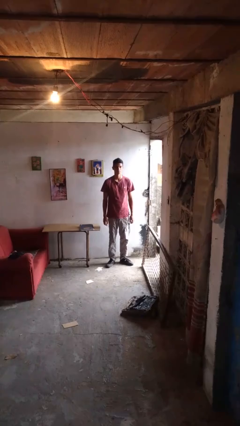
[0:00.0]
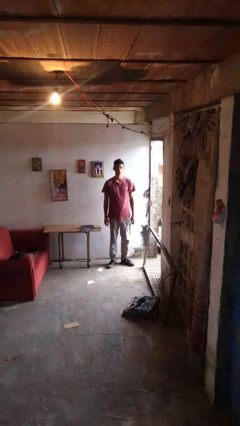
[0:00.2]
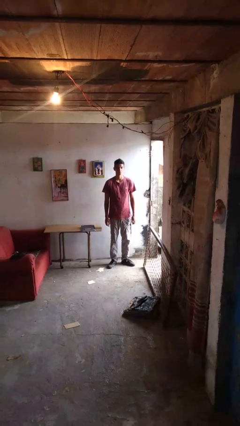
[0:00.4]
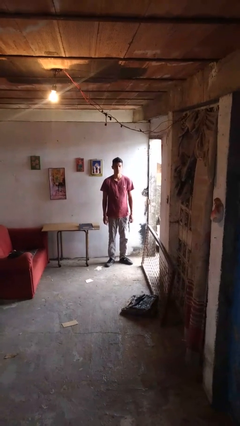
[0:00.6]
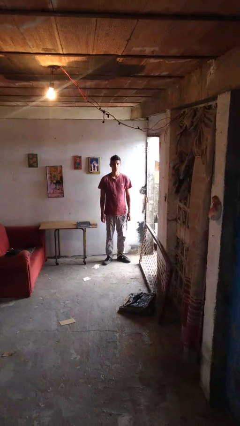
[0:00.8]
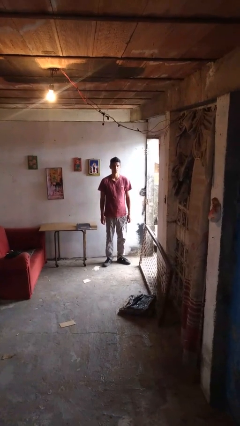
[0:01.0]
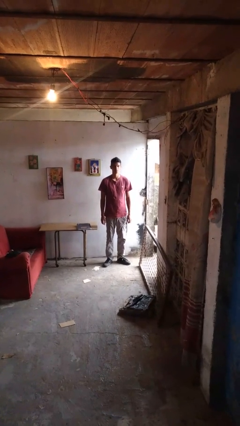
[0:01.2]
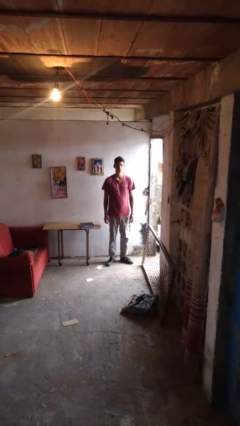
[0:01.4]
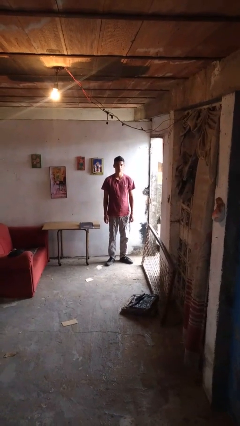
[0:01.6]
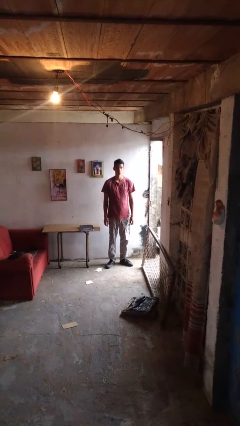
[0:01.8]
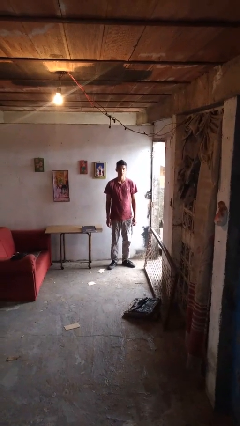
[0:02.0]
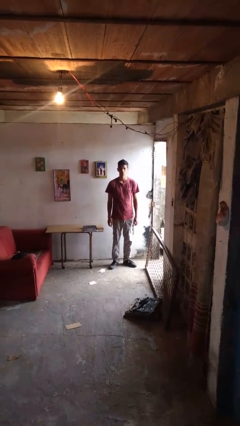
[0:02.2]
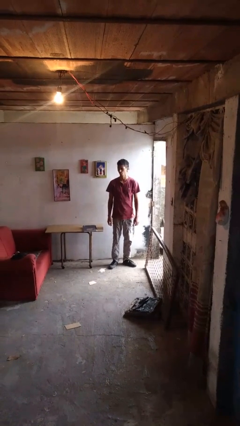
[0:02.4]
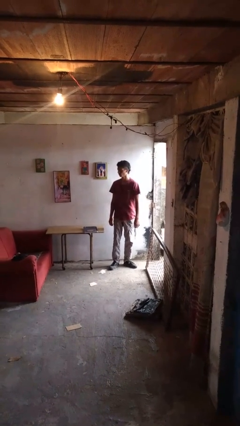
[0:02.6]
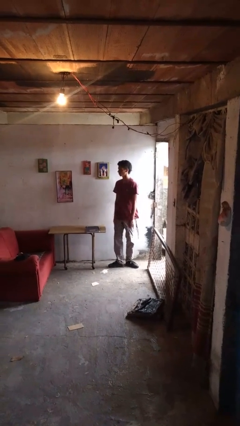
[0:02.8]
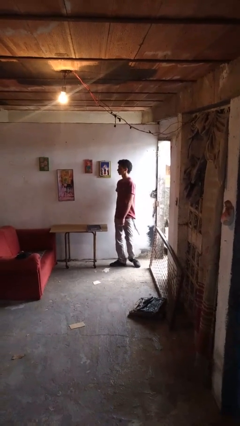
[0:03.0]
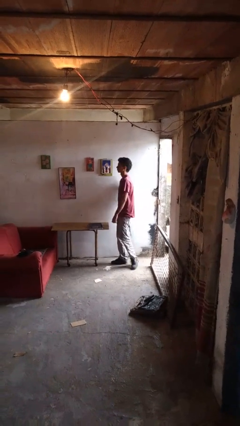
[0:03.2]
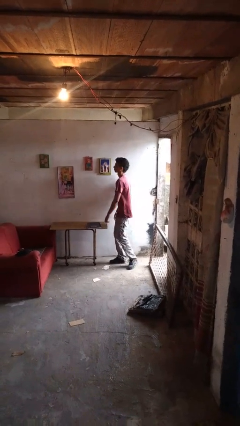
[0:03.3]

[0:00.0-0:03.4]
person picks up object from floor

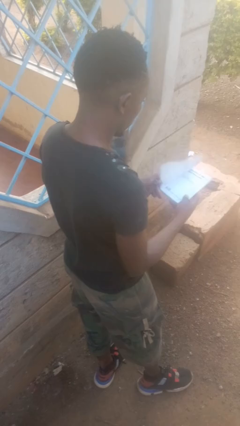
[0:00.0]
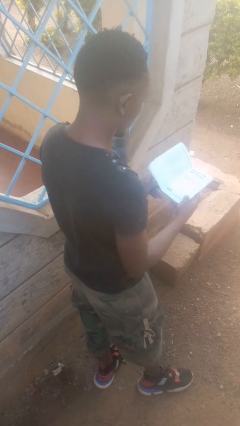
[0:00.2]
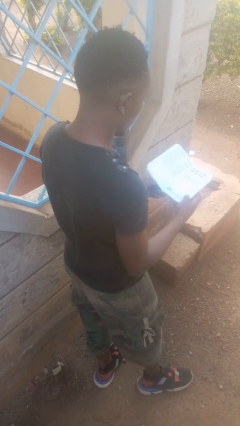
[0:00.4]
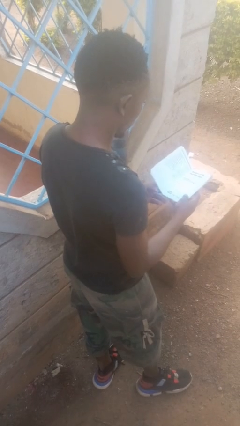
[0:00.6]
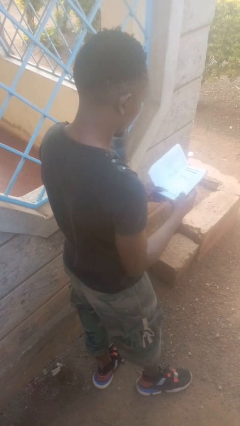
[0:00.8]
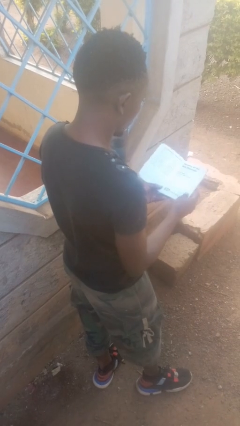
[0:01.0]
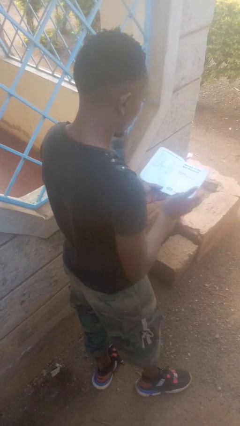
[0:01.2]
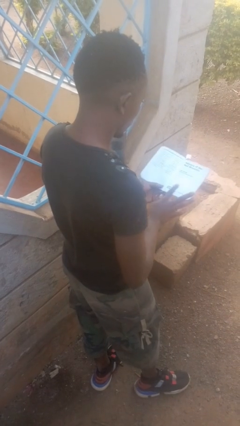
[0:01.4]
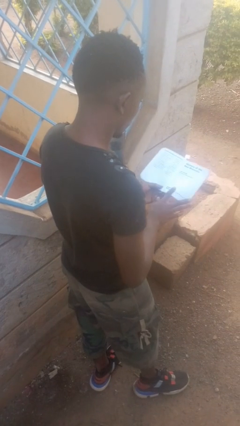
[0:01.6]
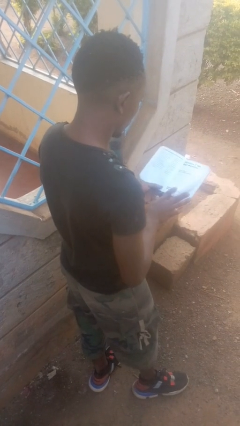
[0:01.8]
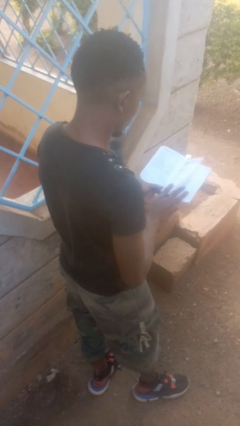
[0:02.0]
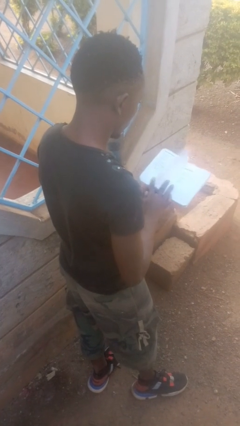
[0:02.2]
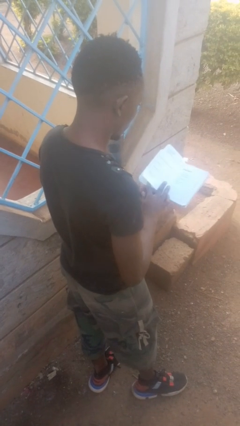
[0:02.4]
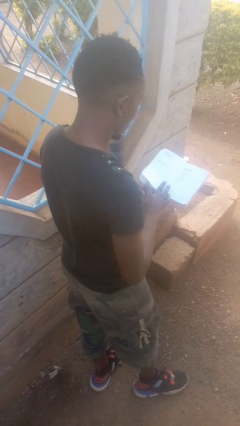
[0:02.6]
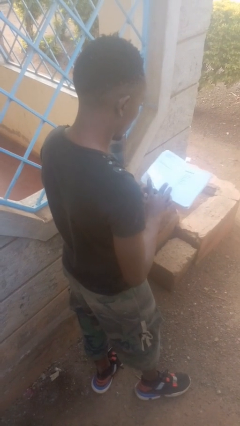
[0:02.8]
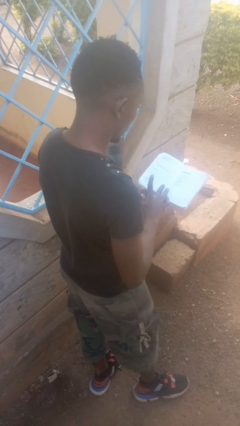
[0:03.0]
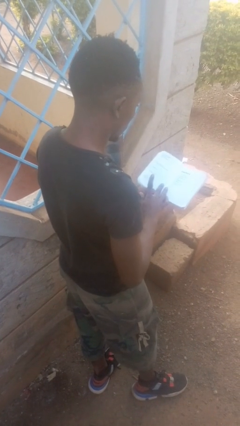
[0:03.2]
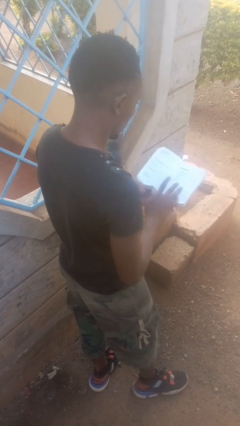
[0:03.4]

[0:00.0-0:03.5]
person reads book

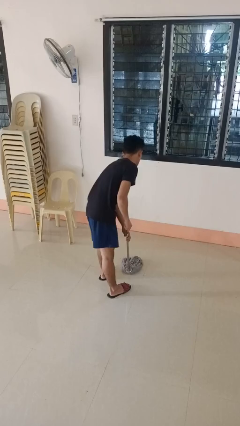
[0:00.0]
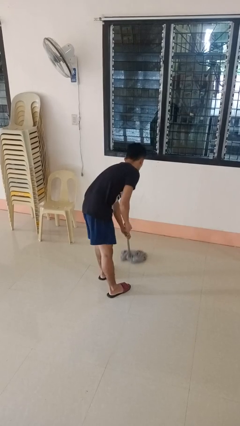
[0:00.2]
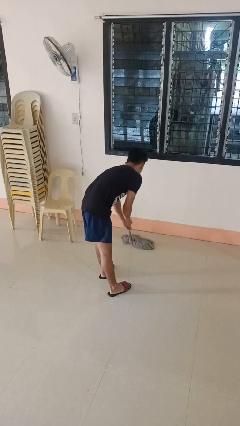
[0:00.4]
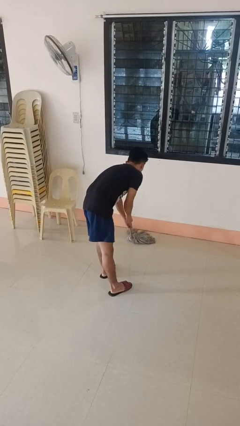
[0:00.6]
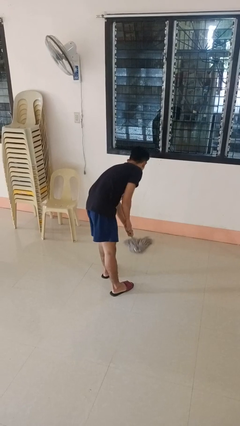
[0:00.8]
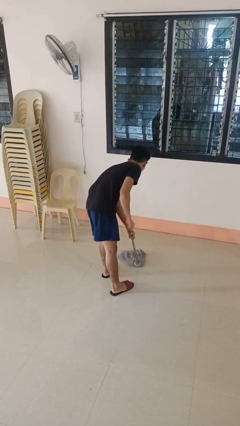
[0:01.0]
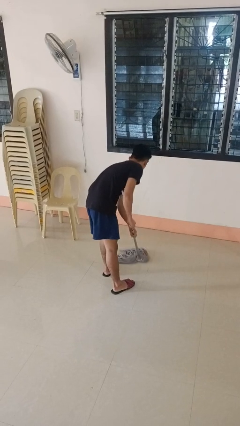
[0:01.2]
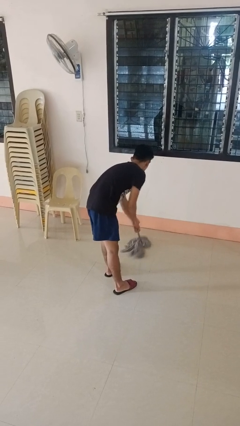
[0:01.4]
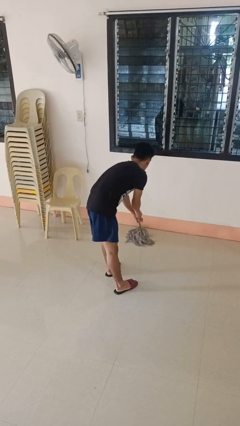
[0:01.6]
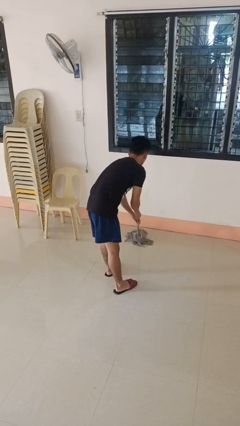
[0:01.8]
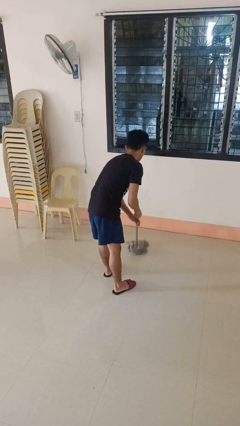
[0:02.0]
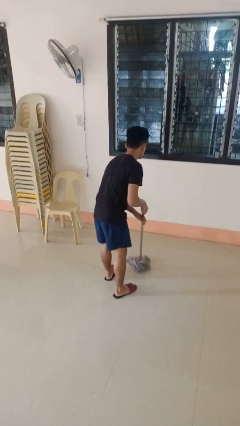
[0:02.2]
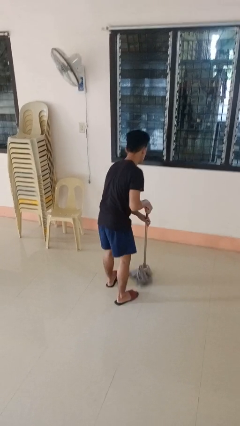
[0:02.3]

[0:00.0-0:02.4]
person mops

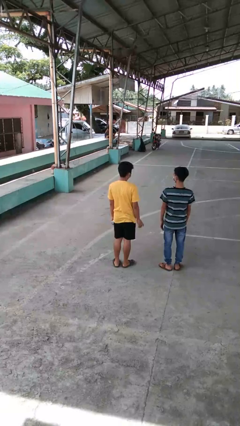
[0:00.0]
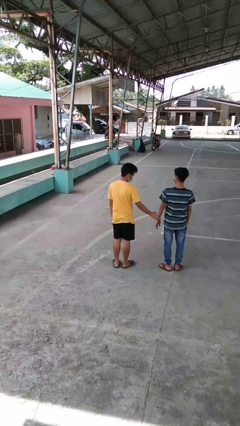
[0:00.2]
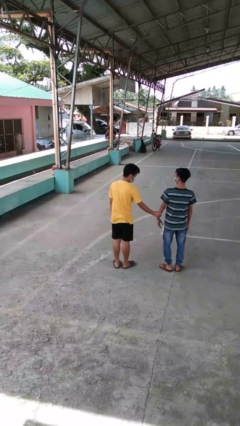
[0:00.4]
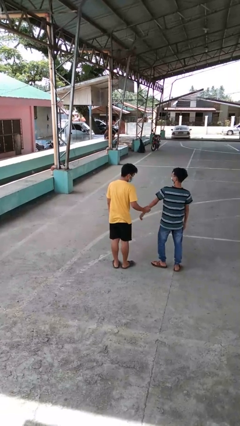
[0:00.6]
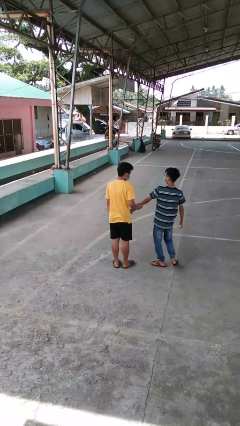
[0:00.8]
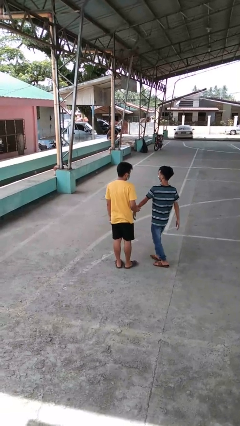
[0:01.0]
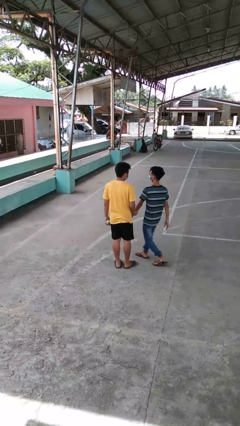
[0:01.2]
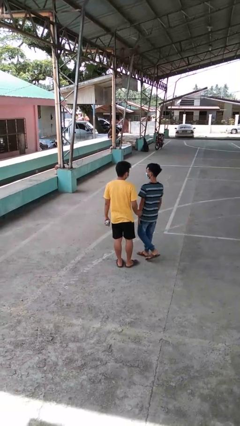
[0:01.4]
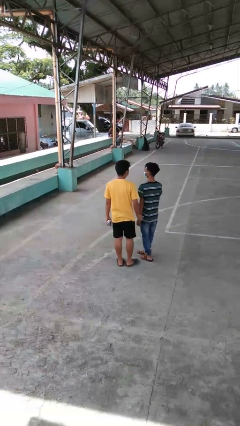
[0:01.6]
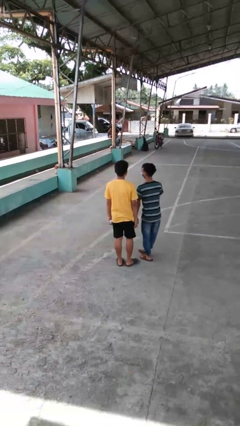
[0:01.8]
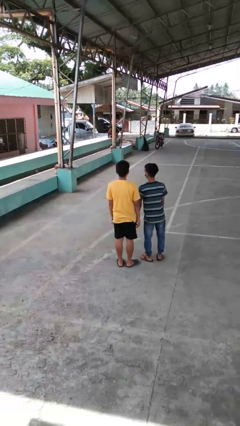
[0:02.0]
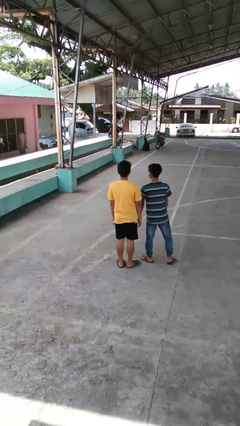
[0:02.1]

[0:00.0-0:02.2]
person grabs person by forearm

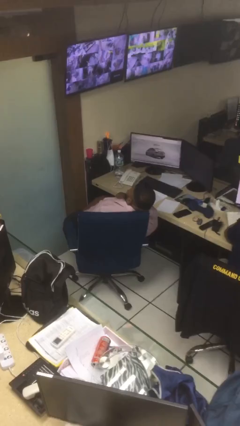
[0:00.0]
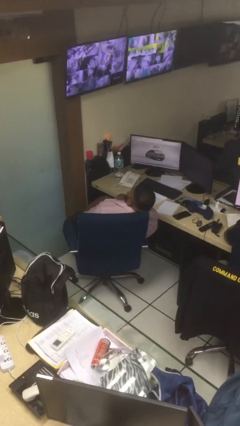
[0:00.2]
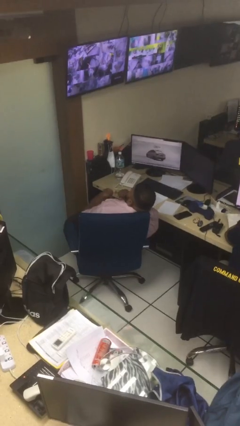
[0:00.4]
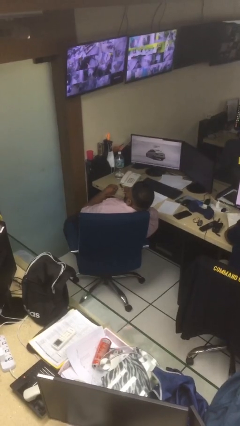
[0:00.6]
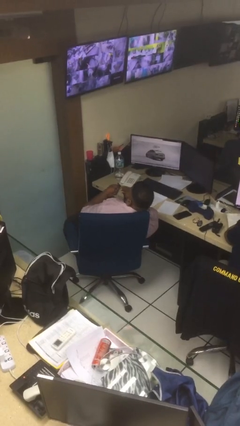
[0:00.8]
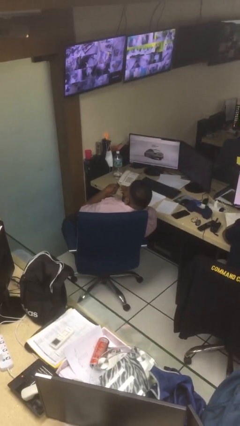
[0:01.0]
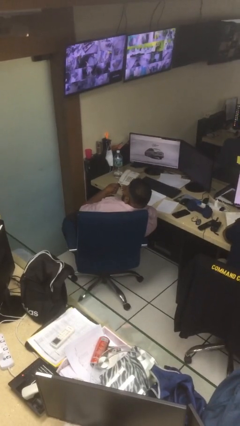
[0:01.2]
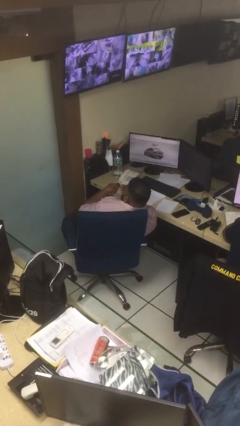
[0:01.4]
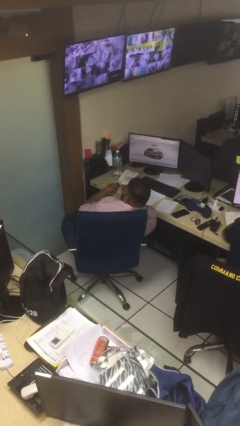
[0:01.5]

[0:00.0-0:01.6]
person files fingernails

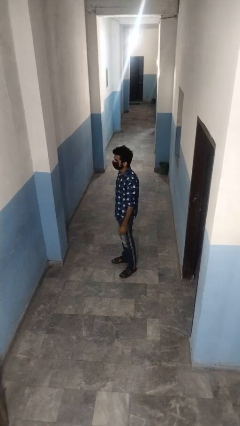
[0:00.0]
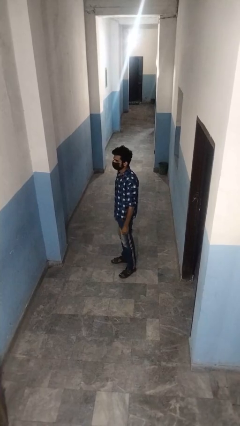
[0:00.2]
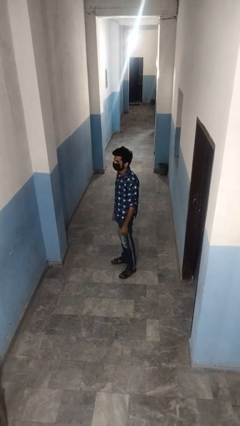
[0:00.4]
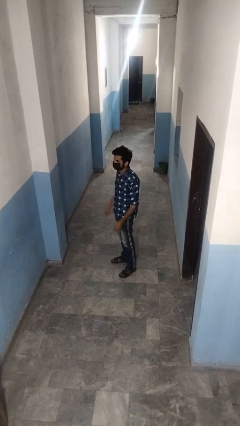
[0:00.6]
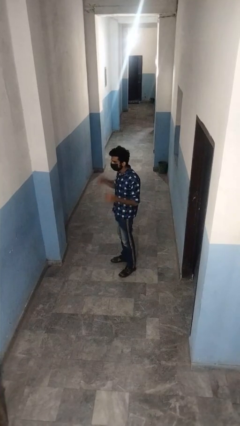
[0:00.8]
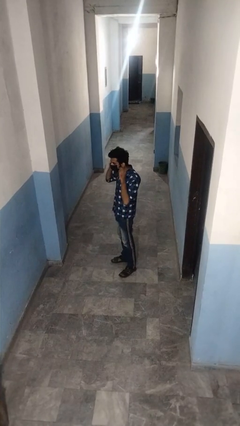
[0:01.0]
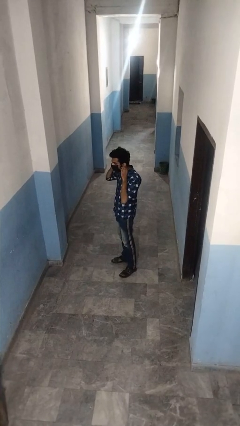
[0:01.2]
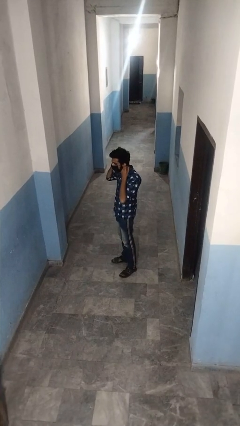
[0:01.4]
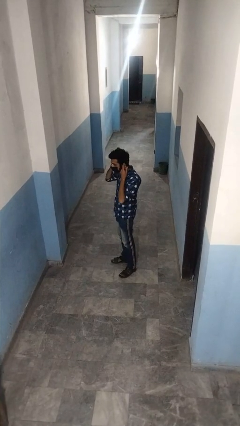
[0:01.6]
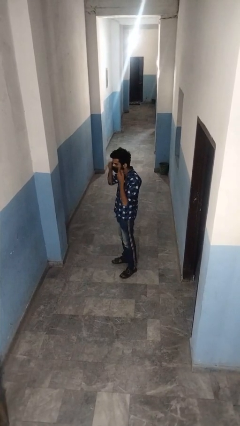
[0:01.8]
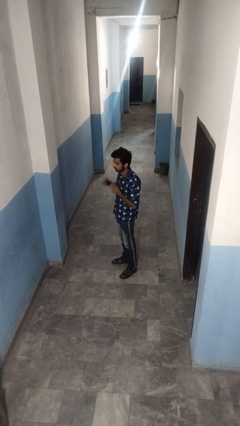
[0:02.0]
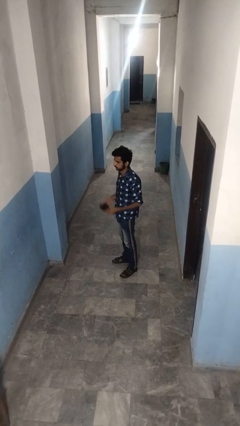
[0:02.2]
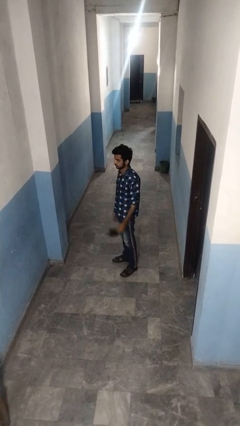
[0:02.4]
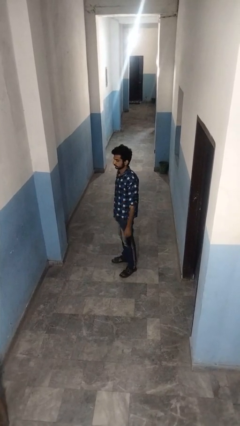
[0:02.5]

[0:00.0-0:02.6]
person takes off facemask

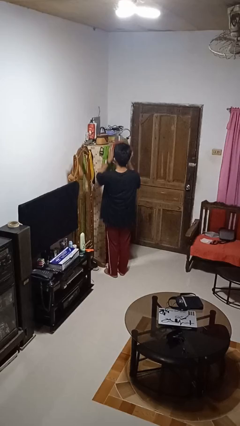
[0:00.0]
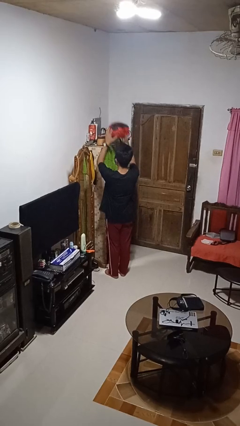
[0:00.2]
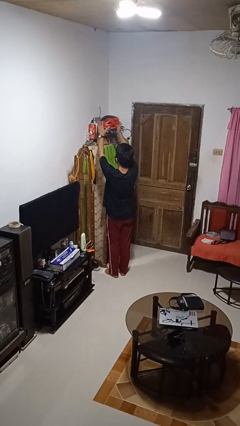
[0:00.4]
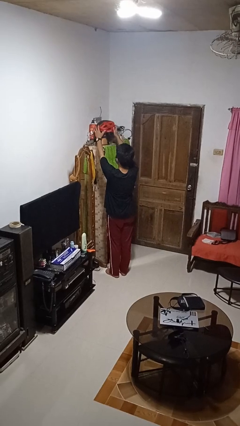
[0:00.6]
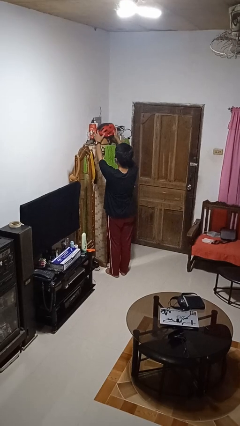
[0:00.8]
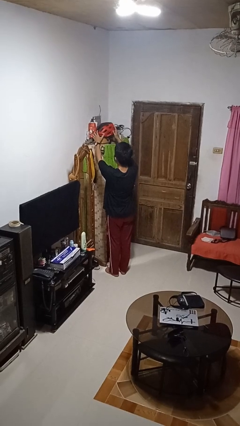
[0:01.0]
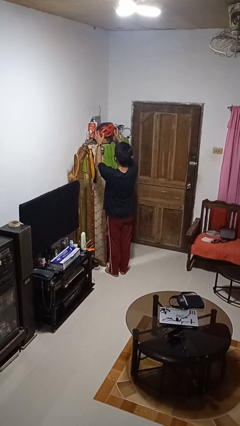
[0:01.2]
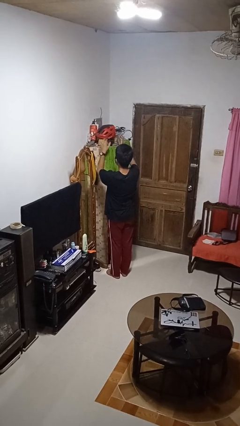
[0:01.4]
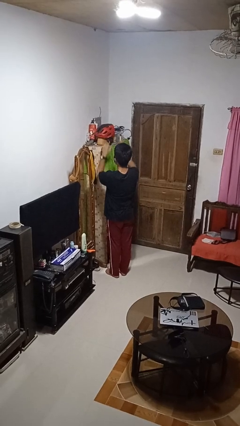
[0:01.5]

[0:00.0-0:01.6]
person puts down object on shelf

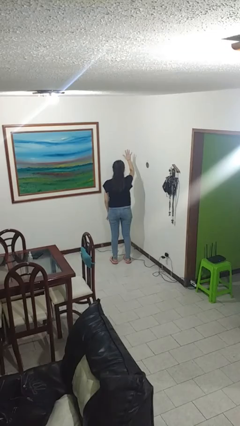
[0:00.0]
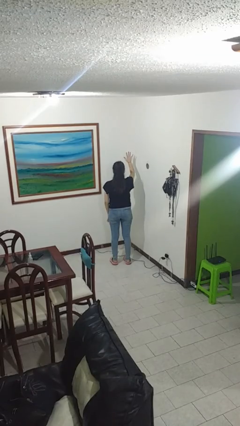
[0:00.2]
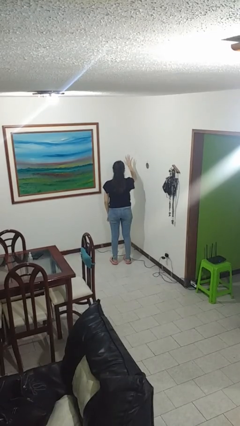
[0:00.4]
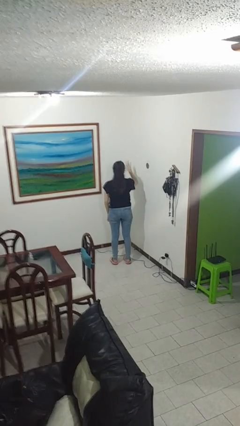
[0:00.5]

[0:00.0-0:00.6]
person gestures number five
